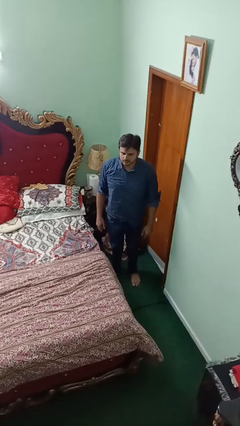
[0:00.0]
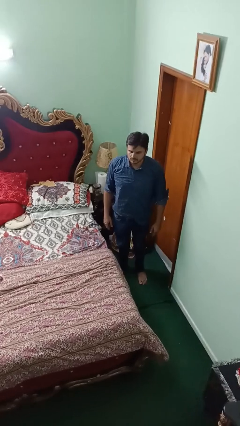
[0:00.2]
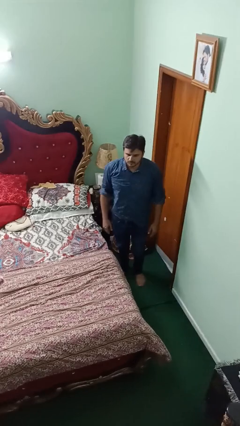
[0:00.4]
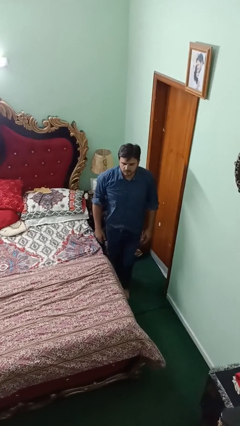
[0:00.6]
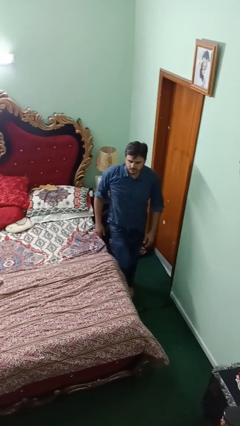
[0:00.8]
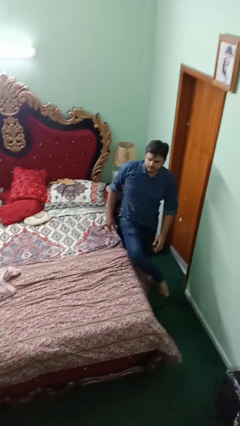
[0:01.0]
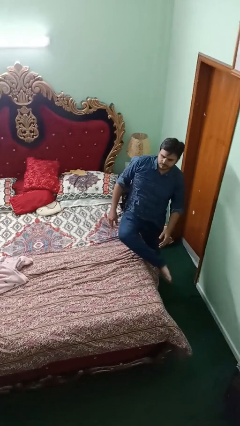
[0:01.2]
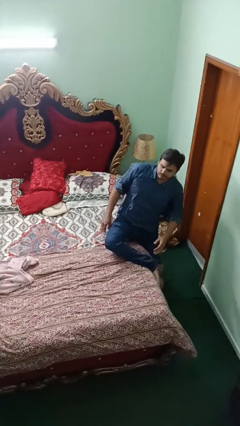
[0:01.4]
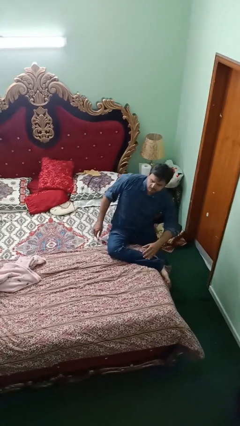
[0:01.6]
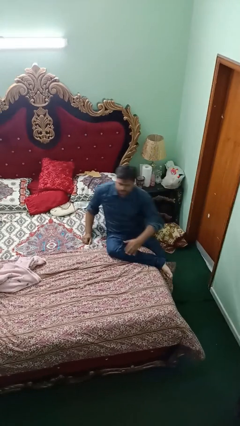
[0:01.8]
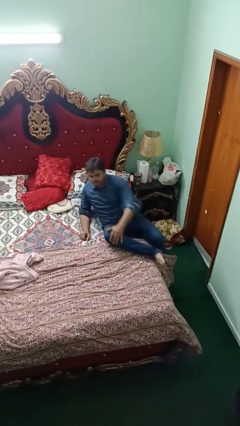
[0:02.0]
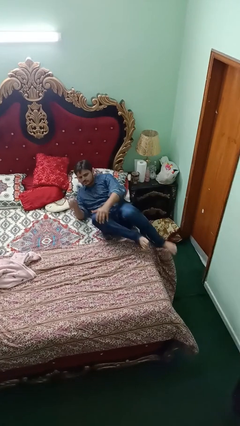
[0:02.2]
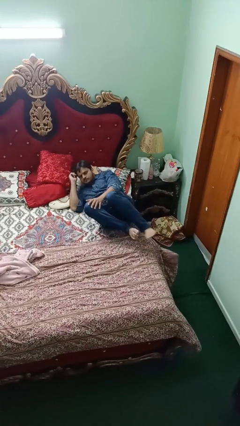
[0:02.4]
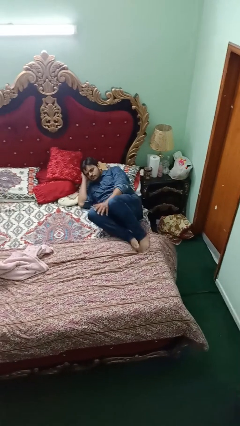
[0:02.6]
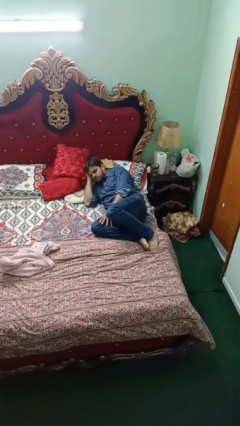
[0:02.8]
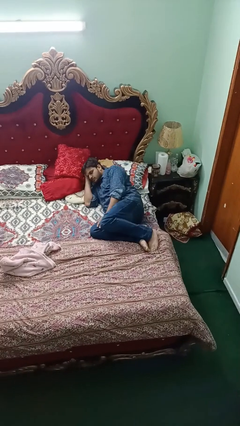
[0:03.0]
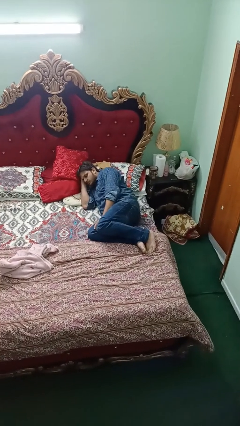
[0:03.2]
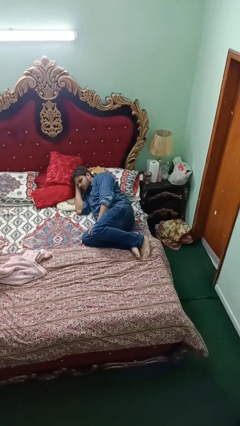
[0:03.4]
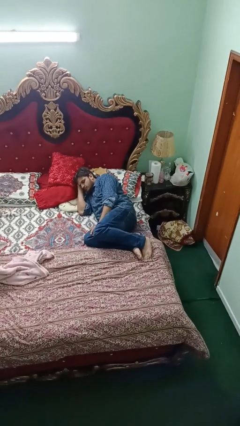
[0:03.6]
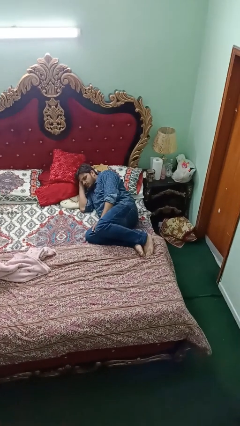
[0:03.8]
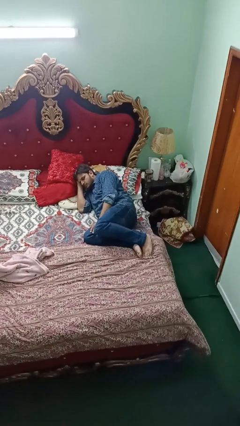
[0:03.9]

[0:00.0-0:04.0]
person lies down on bed

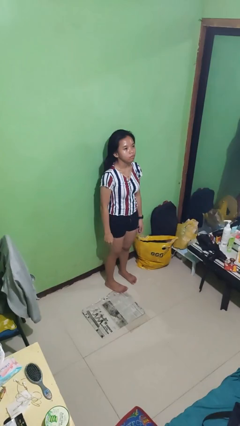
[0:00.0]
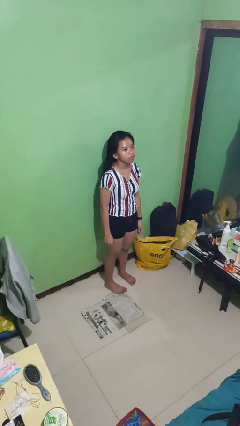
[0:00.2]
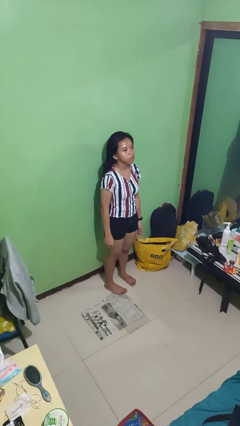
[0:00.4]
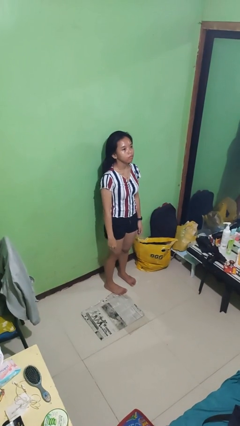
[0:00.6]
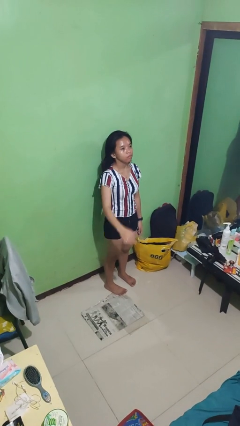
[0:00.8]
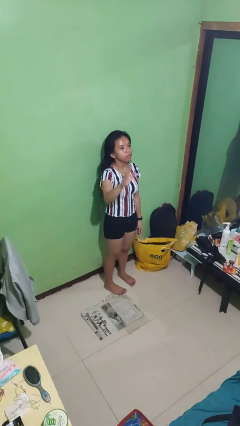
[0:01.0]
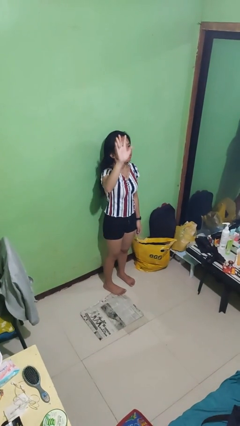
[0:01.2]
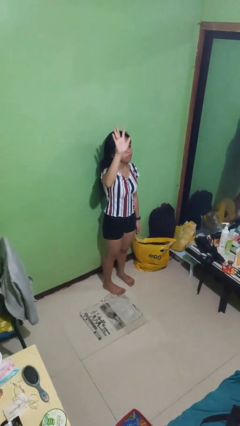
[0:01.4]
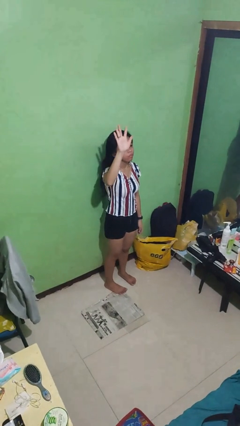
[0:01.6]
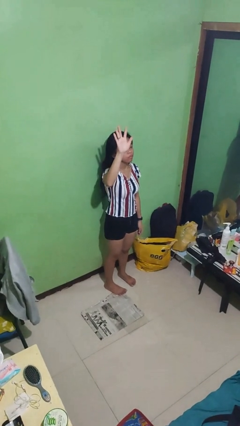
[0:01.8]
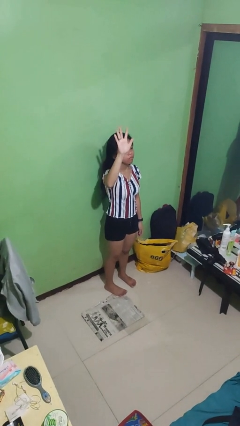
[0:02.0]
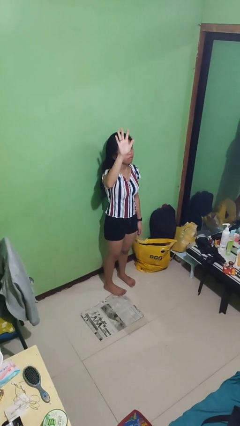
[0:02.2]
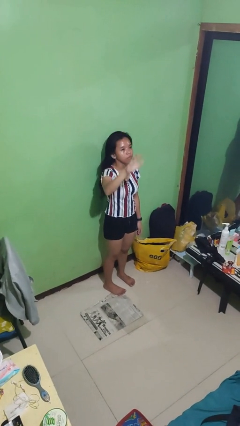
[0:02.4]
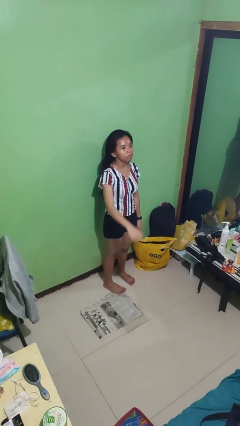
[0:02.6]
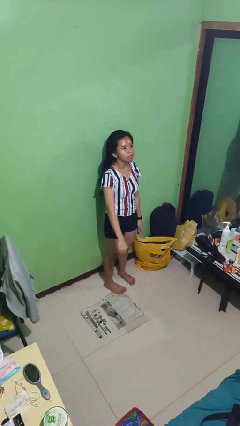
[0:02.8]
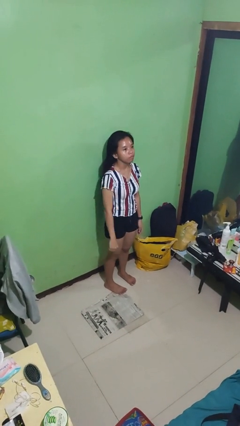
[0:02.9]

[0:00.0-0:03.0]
person gestures number five

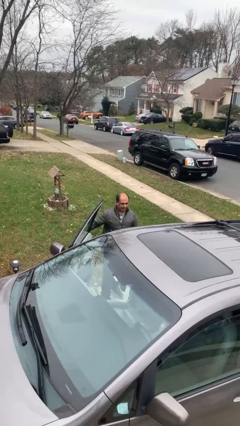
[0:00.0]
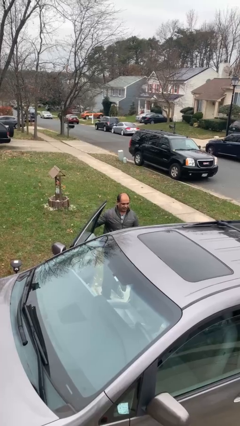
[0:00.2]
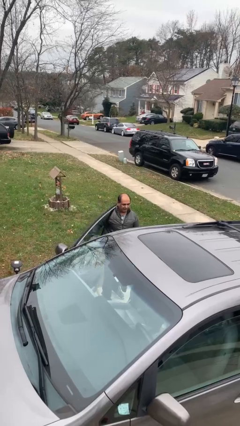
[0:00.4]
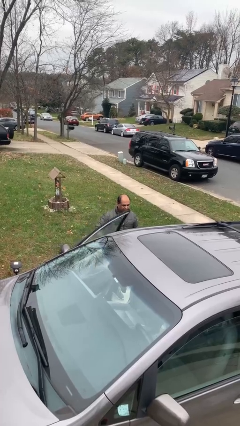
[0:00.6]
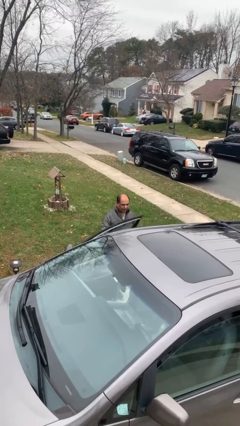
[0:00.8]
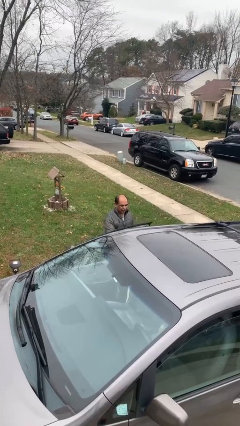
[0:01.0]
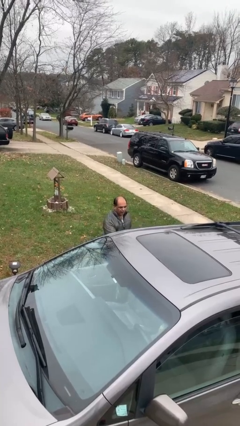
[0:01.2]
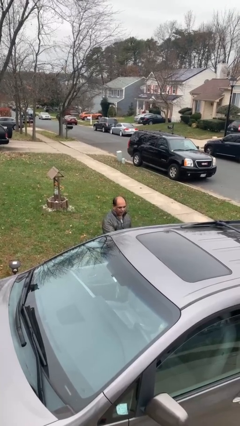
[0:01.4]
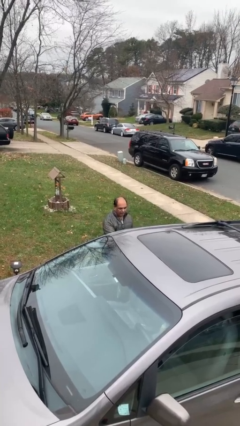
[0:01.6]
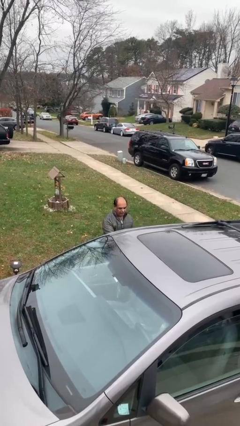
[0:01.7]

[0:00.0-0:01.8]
person closes car door

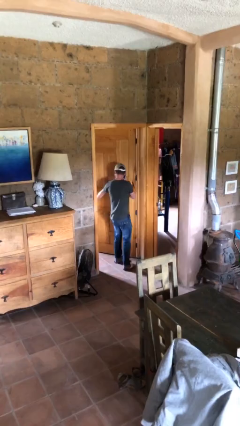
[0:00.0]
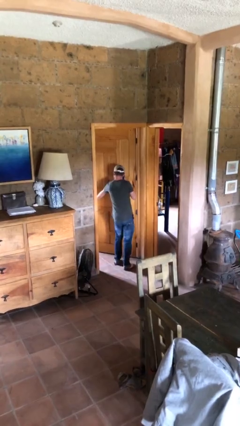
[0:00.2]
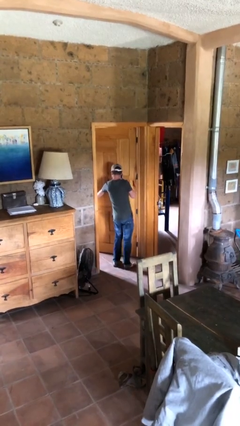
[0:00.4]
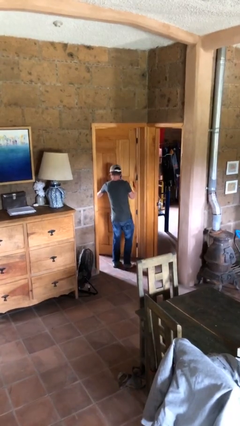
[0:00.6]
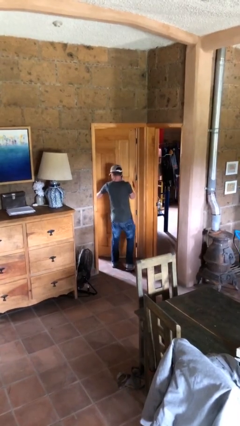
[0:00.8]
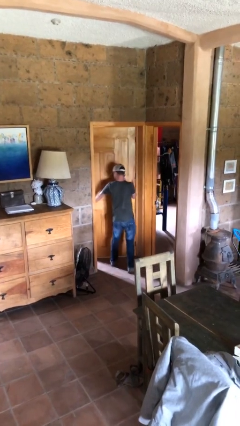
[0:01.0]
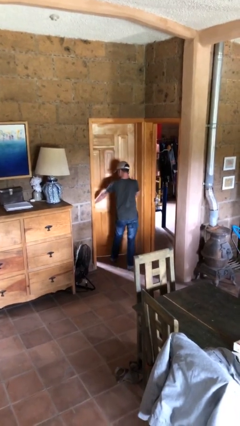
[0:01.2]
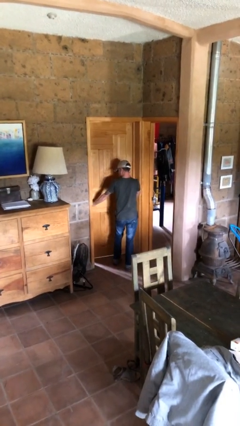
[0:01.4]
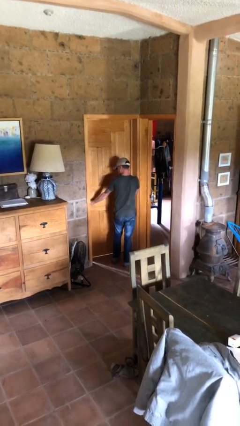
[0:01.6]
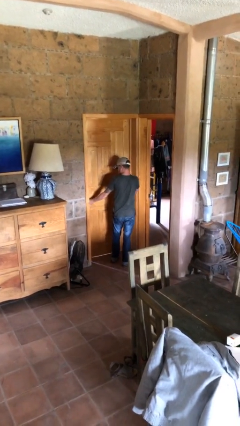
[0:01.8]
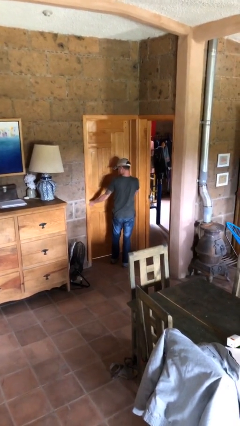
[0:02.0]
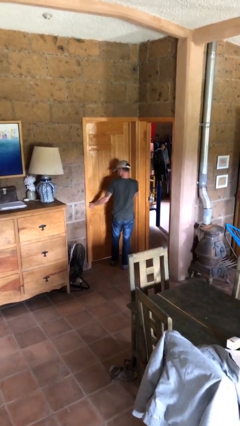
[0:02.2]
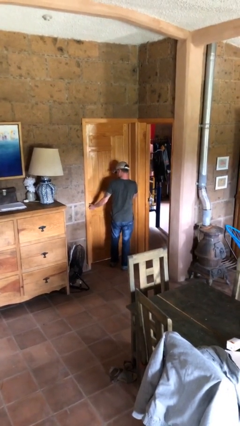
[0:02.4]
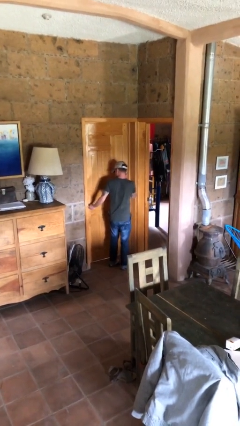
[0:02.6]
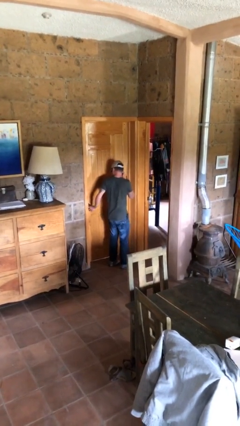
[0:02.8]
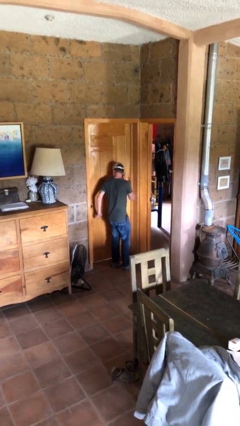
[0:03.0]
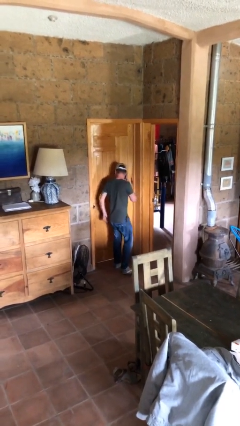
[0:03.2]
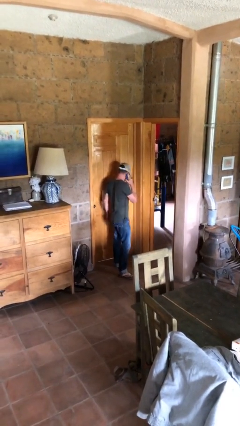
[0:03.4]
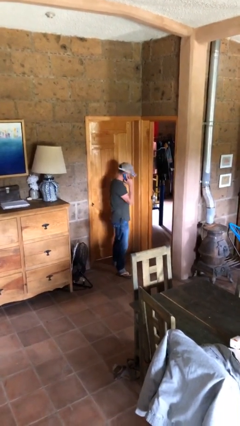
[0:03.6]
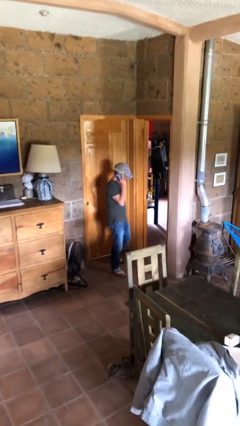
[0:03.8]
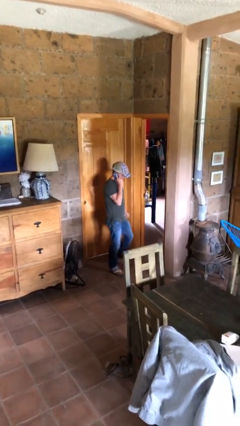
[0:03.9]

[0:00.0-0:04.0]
person closes facility door

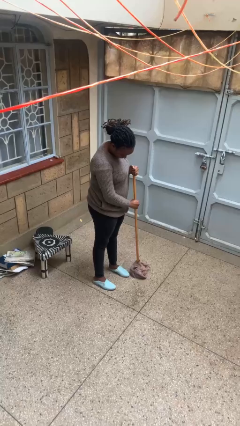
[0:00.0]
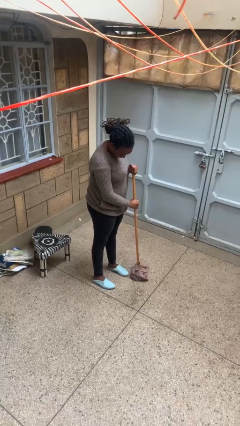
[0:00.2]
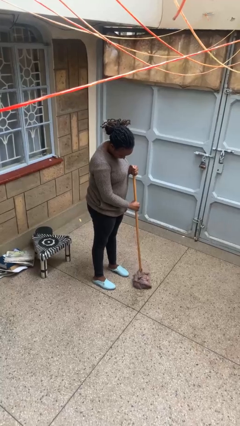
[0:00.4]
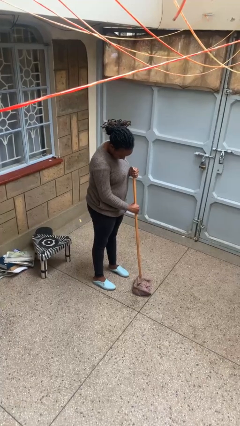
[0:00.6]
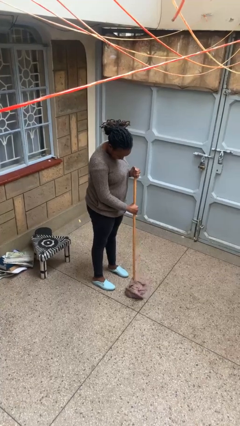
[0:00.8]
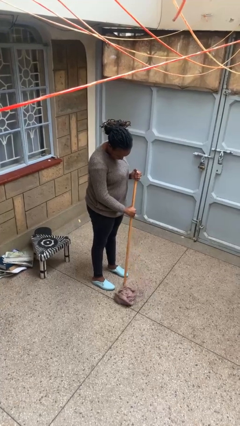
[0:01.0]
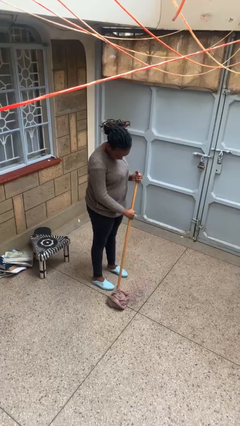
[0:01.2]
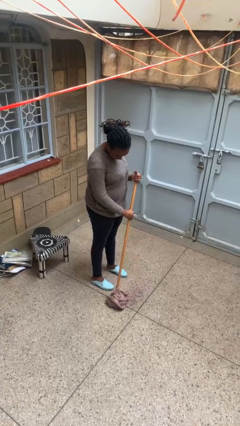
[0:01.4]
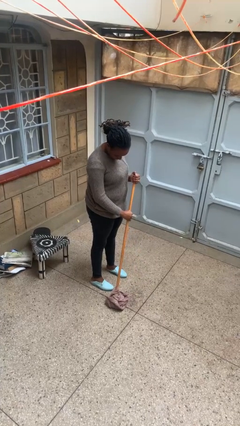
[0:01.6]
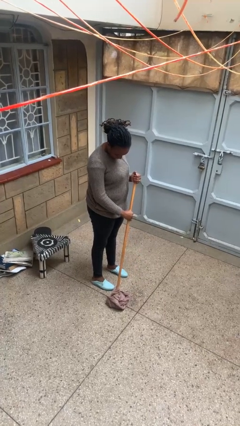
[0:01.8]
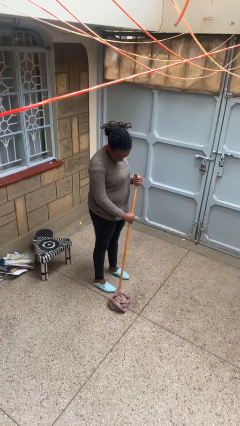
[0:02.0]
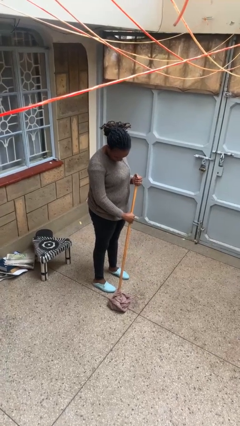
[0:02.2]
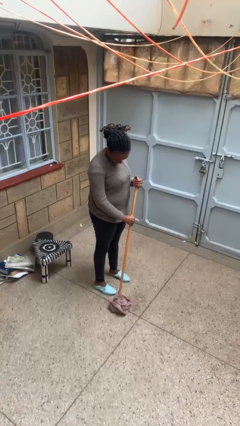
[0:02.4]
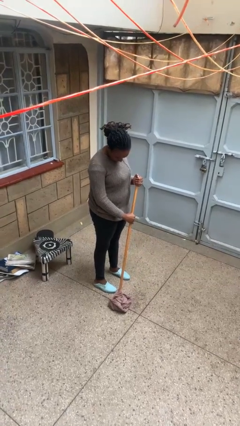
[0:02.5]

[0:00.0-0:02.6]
person mops

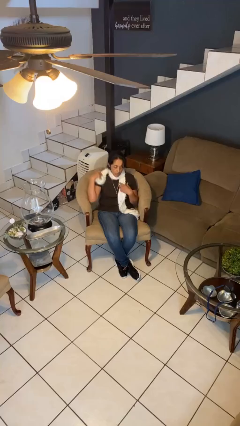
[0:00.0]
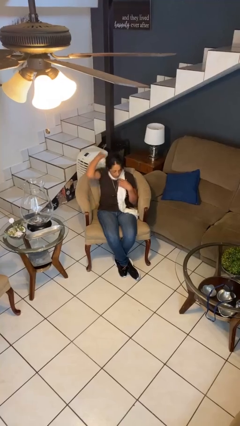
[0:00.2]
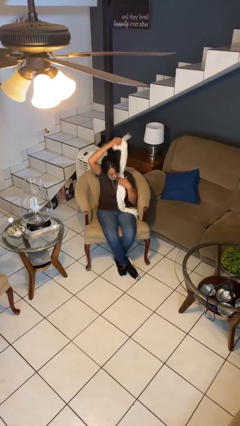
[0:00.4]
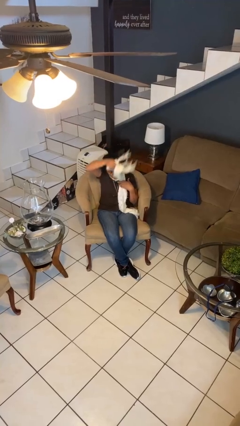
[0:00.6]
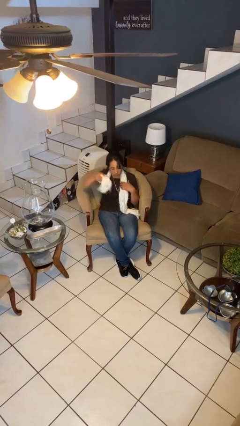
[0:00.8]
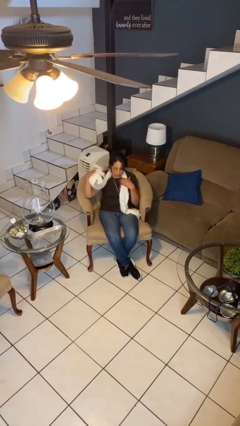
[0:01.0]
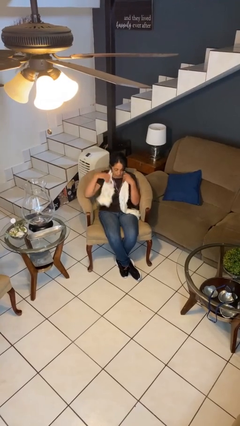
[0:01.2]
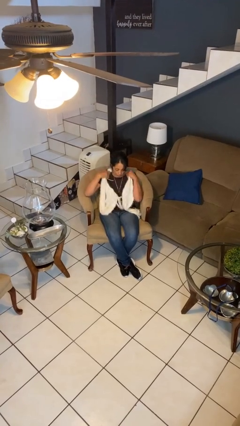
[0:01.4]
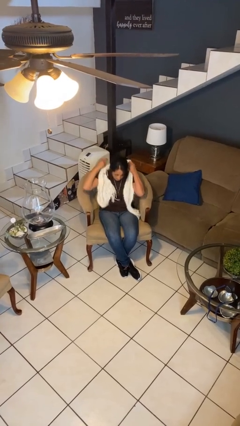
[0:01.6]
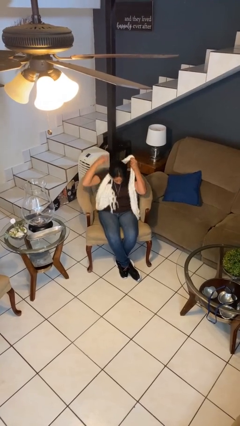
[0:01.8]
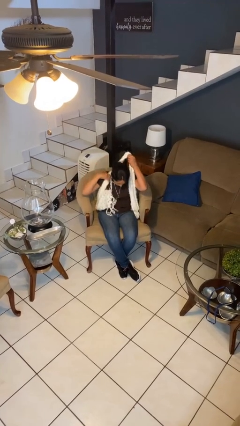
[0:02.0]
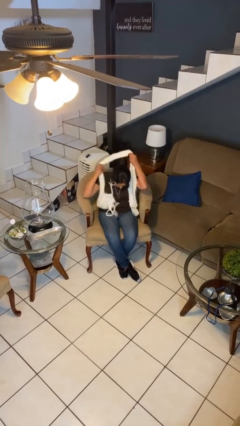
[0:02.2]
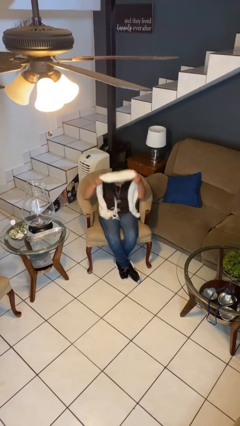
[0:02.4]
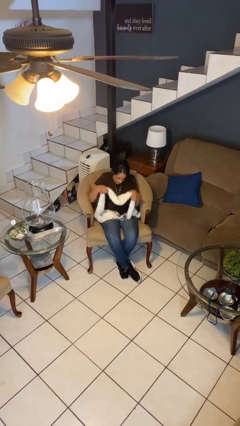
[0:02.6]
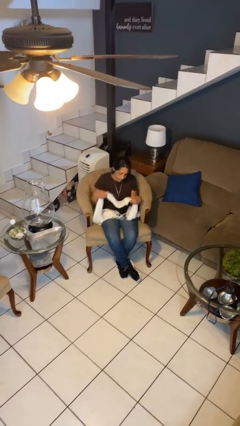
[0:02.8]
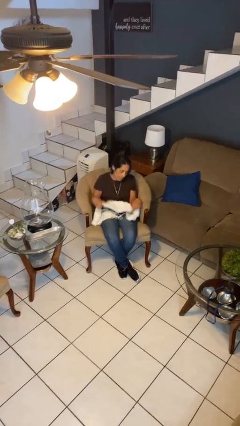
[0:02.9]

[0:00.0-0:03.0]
person takes off scarf
